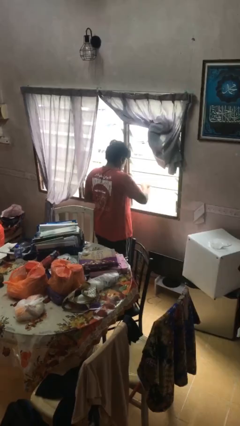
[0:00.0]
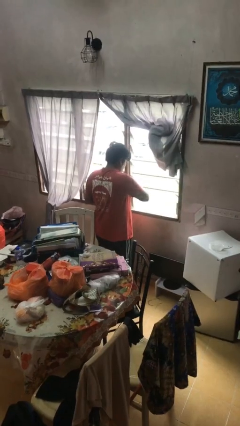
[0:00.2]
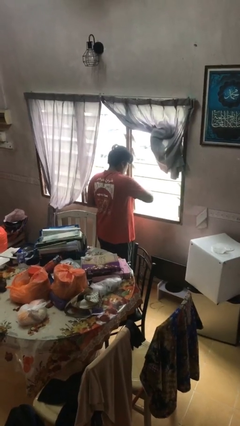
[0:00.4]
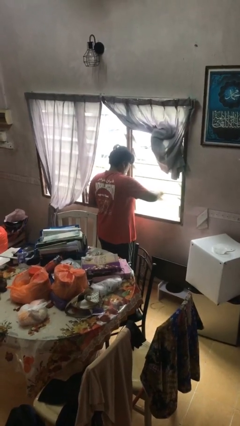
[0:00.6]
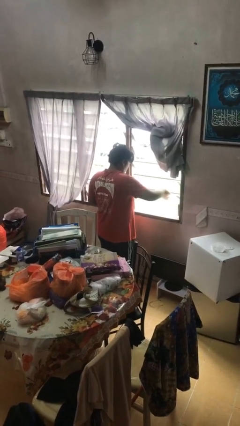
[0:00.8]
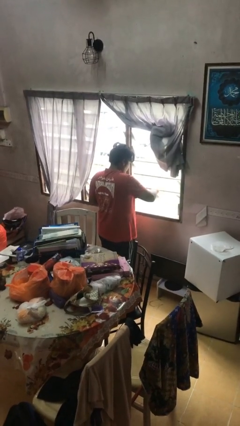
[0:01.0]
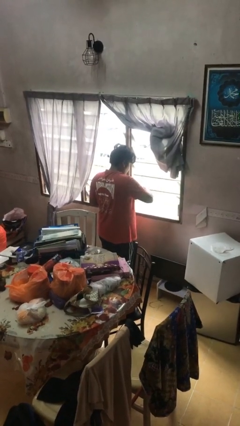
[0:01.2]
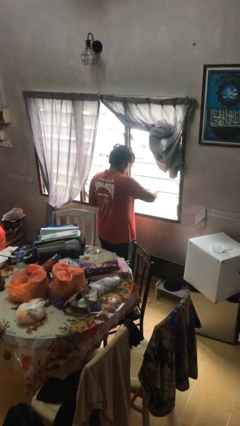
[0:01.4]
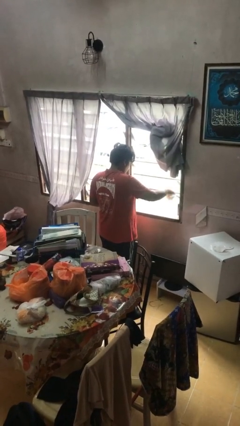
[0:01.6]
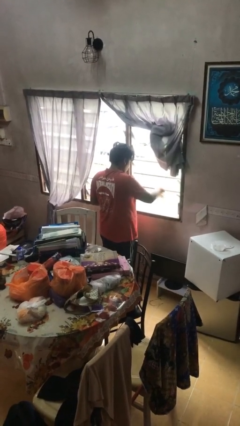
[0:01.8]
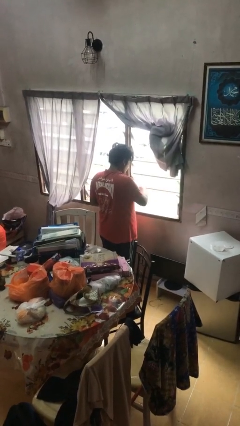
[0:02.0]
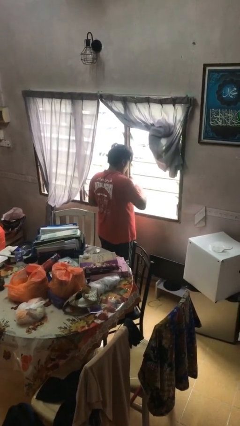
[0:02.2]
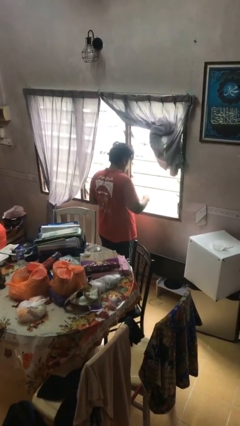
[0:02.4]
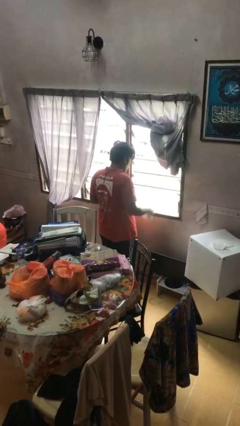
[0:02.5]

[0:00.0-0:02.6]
person washes window

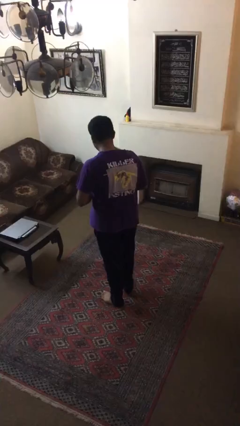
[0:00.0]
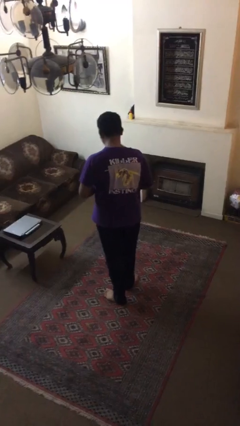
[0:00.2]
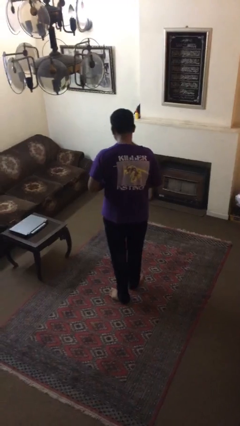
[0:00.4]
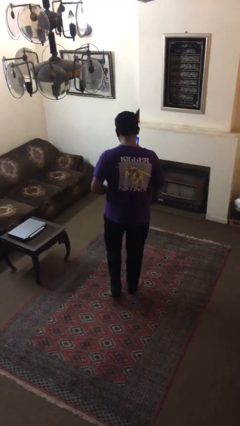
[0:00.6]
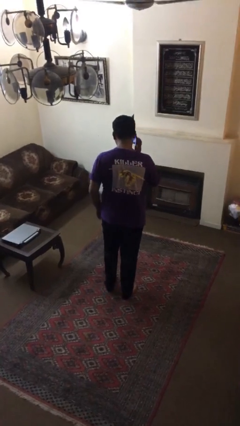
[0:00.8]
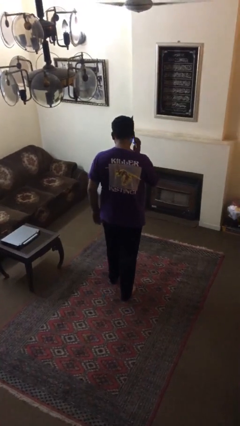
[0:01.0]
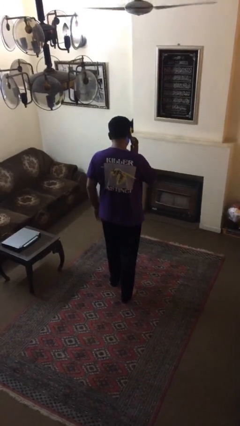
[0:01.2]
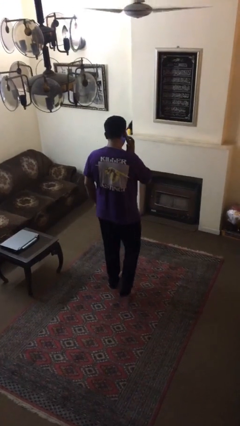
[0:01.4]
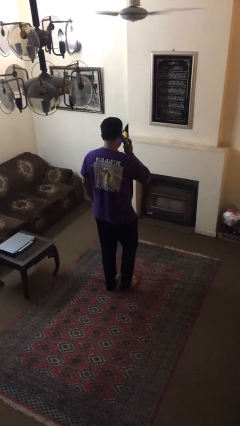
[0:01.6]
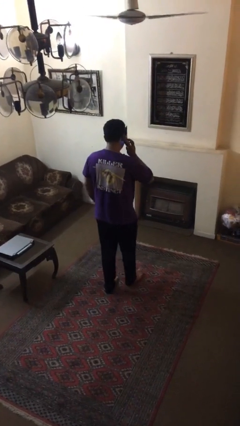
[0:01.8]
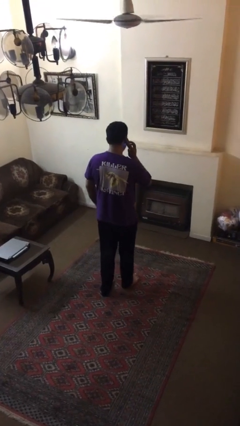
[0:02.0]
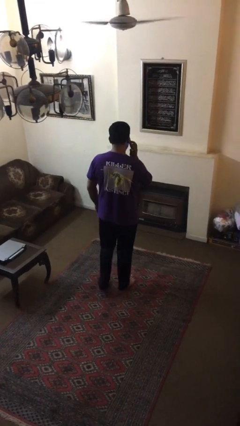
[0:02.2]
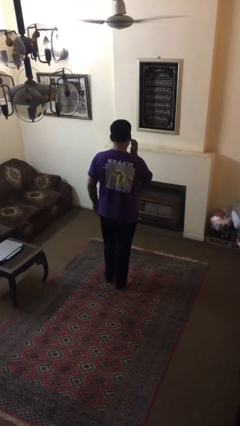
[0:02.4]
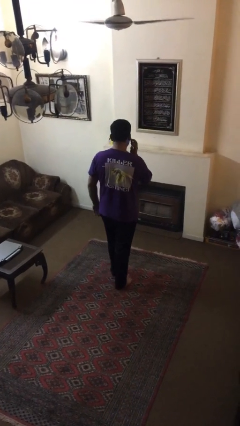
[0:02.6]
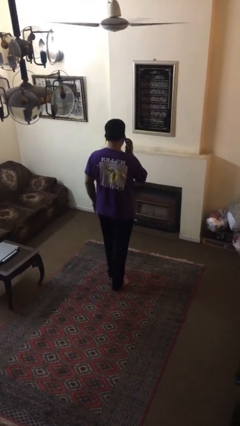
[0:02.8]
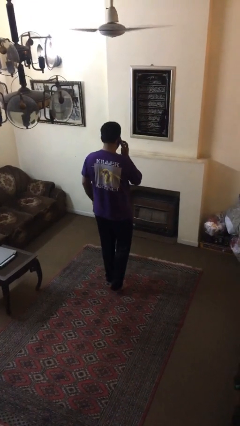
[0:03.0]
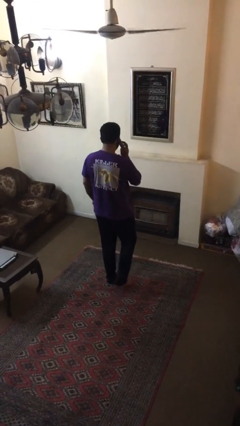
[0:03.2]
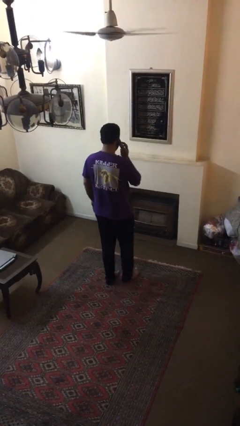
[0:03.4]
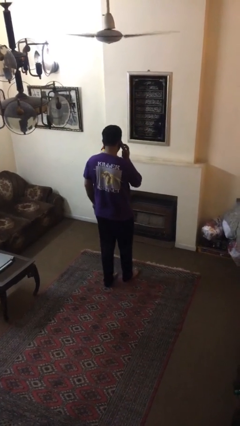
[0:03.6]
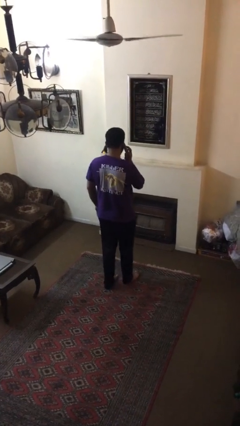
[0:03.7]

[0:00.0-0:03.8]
person talks on phone

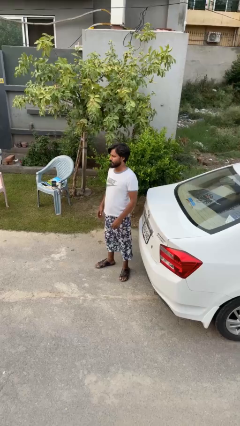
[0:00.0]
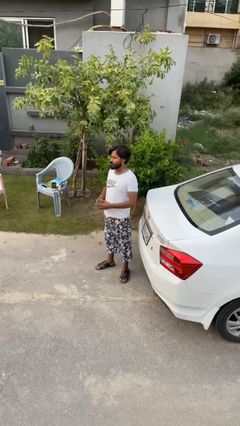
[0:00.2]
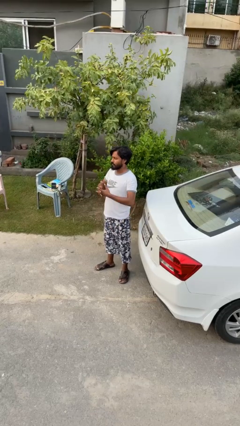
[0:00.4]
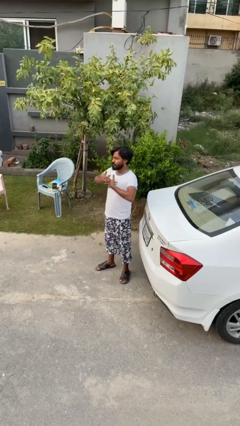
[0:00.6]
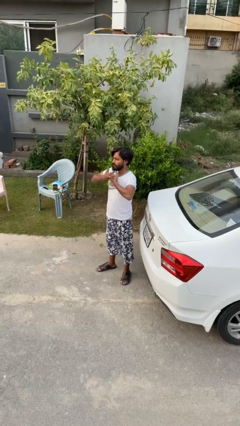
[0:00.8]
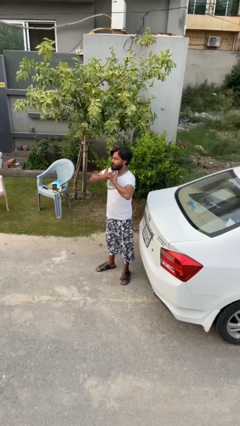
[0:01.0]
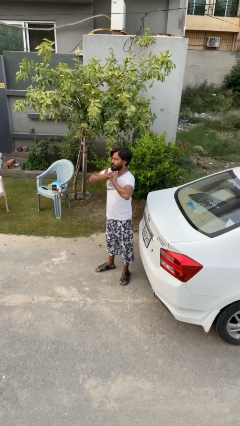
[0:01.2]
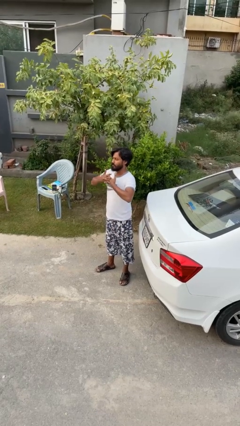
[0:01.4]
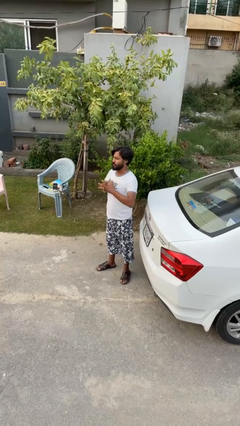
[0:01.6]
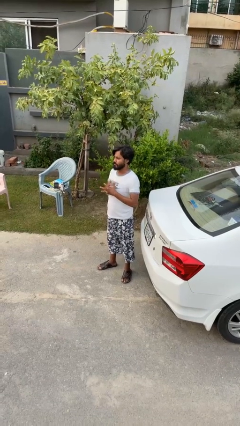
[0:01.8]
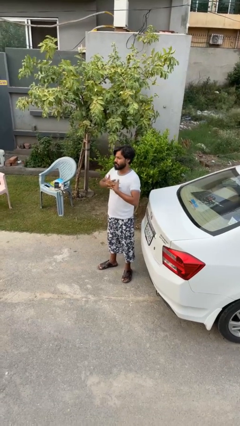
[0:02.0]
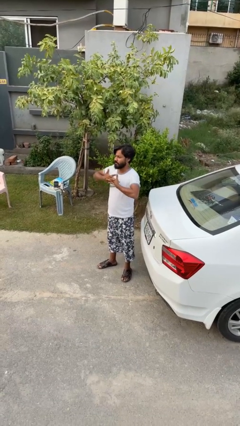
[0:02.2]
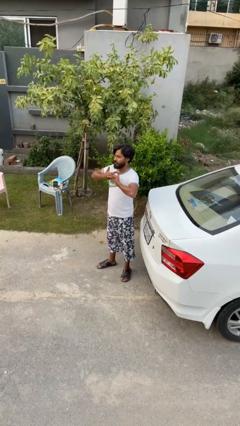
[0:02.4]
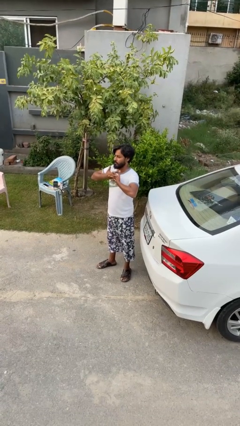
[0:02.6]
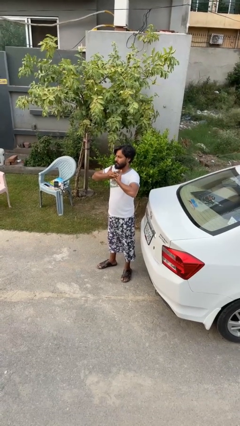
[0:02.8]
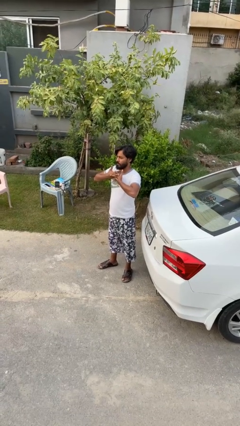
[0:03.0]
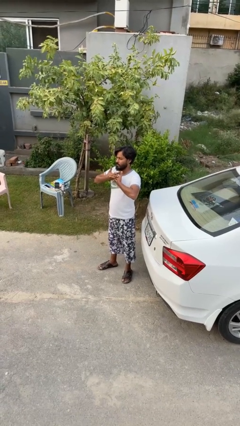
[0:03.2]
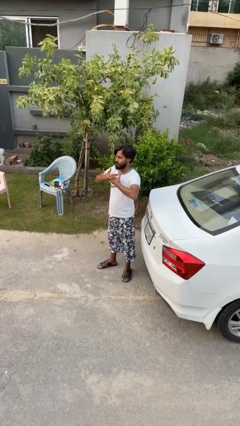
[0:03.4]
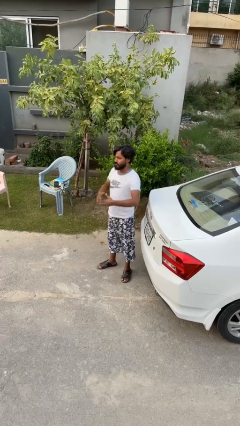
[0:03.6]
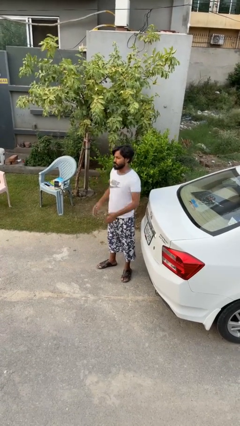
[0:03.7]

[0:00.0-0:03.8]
person cracks knuckles

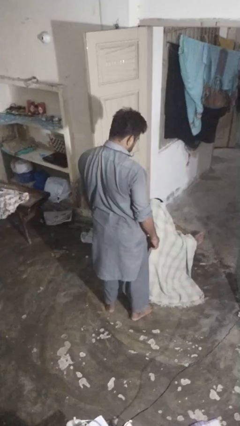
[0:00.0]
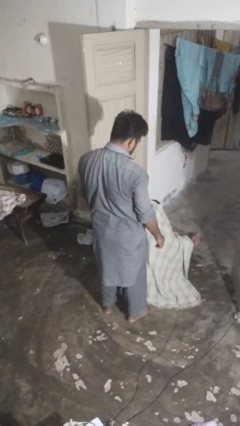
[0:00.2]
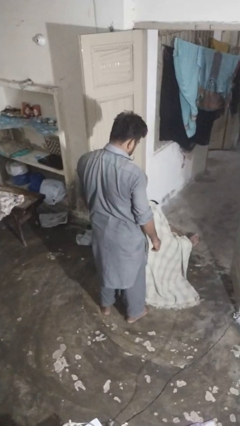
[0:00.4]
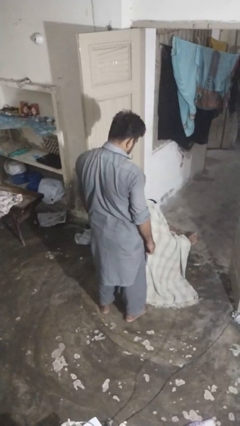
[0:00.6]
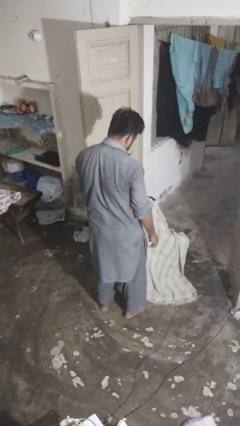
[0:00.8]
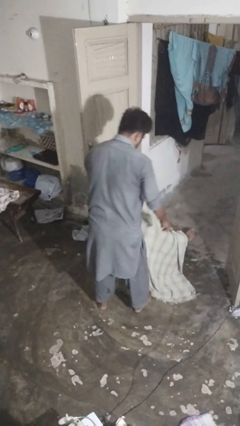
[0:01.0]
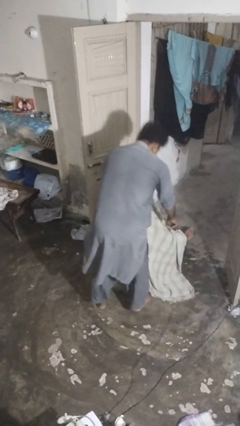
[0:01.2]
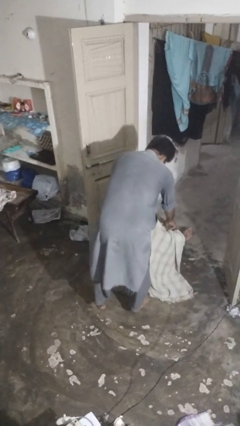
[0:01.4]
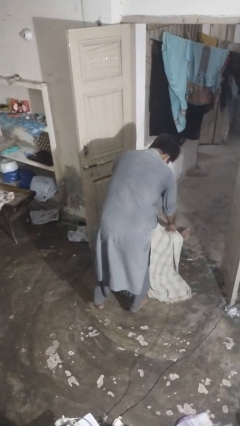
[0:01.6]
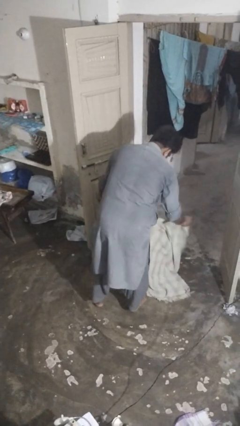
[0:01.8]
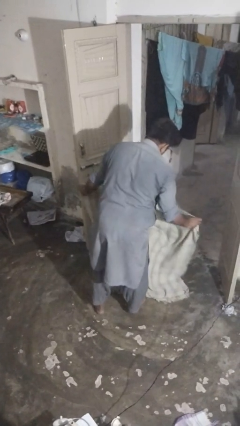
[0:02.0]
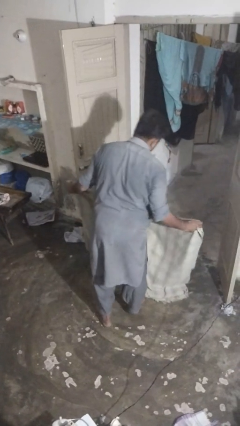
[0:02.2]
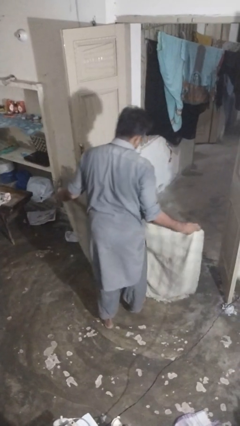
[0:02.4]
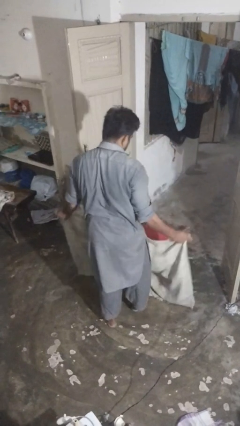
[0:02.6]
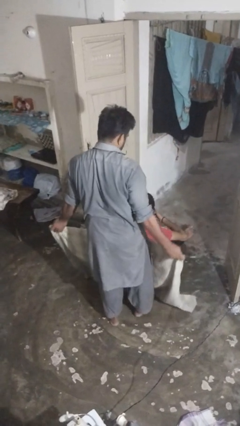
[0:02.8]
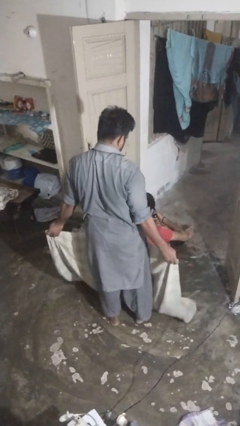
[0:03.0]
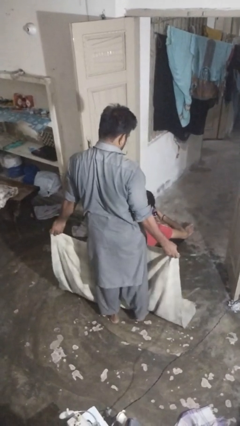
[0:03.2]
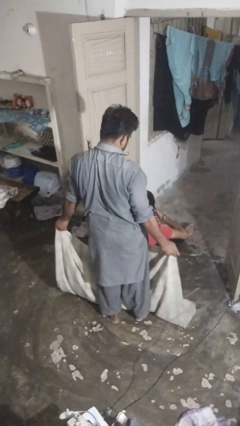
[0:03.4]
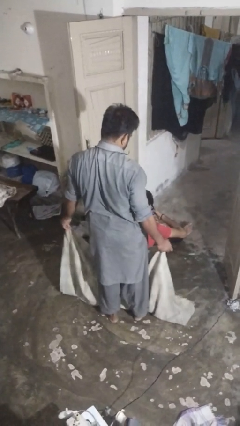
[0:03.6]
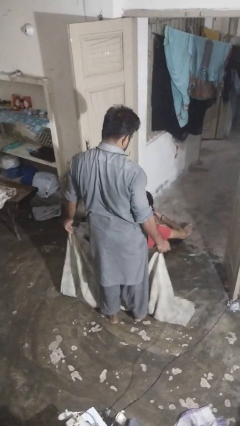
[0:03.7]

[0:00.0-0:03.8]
person uncovers friend with blanket

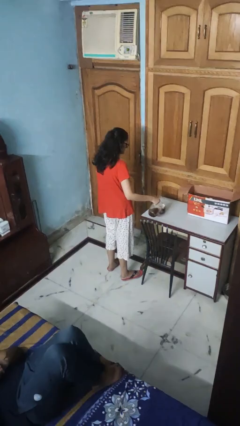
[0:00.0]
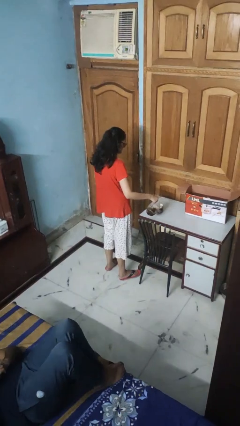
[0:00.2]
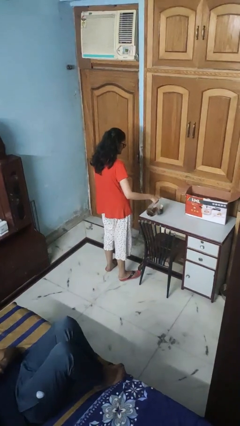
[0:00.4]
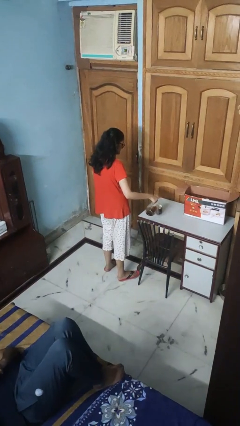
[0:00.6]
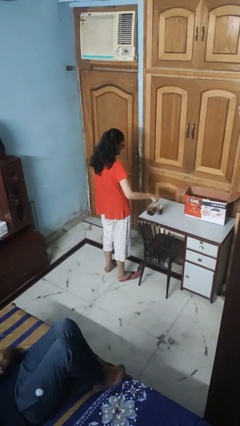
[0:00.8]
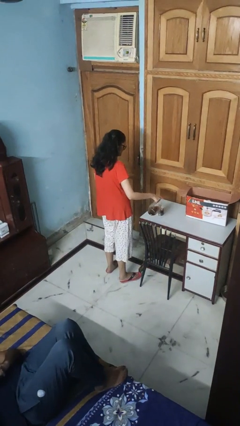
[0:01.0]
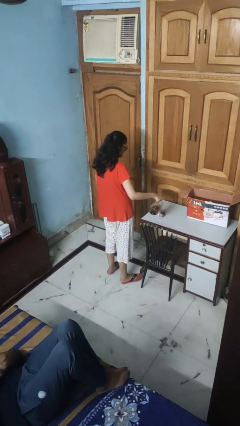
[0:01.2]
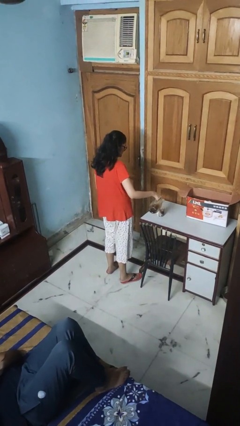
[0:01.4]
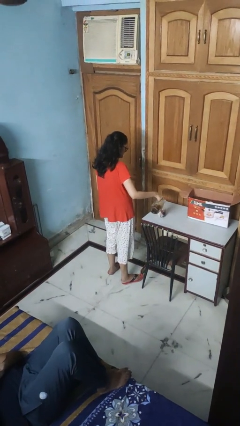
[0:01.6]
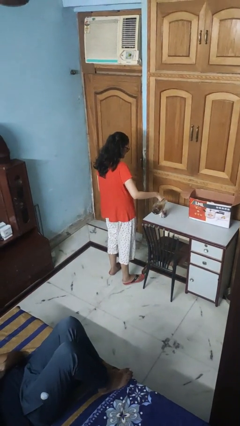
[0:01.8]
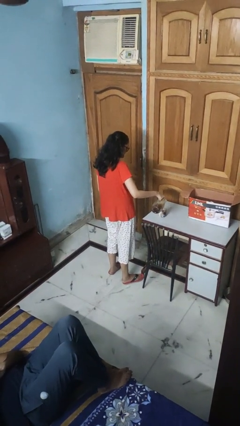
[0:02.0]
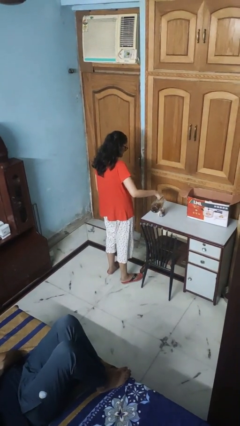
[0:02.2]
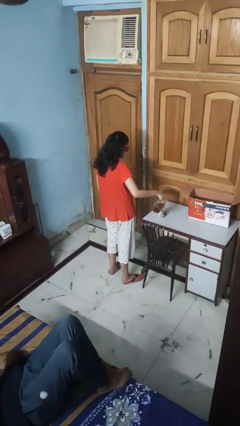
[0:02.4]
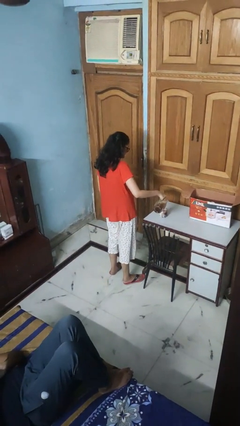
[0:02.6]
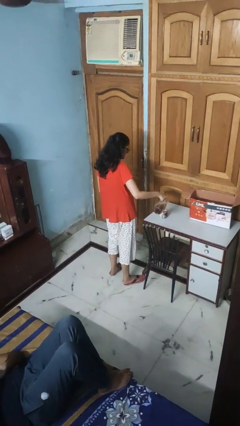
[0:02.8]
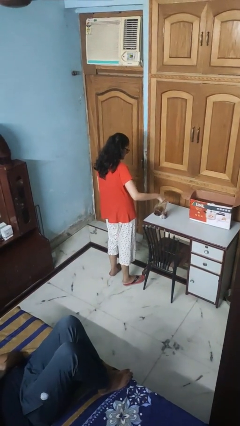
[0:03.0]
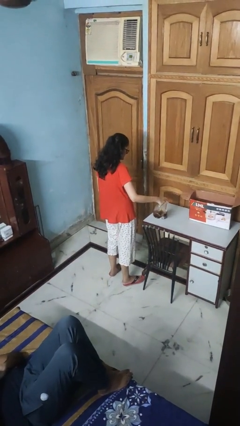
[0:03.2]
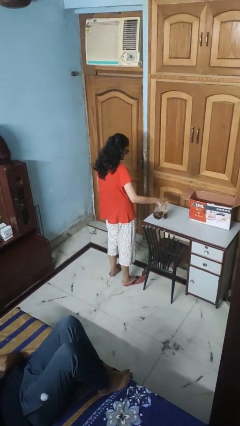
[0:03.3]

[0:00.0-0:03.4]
person pours coffee into mug
